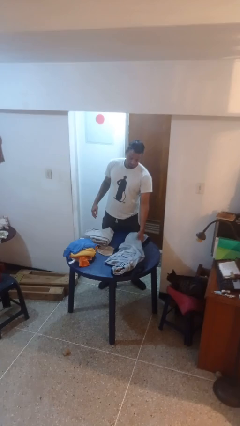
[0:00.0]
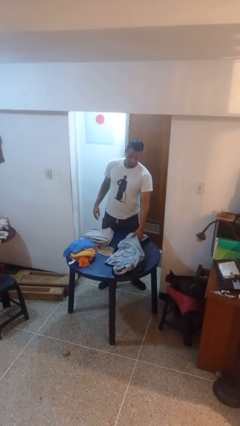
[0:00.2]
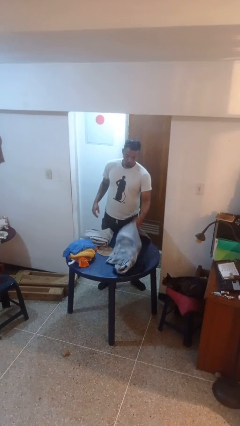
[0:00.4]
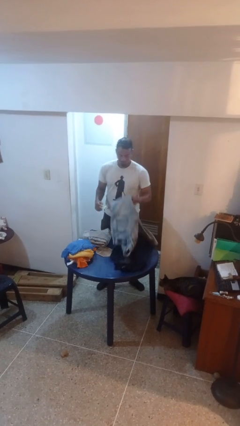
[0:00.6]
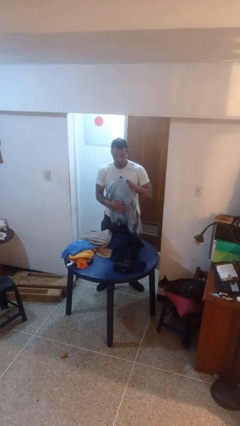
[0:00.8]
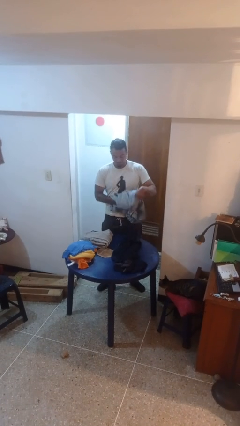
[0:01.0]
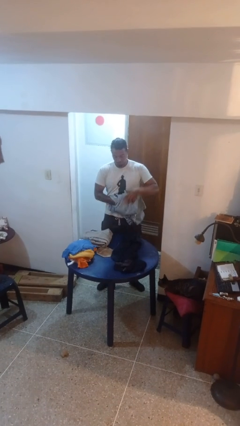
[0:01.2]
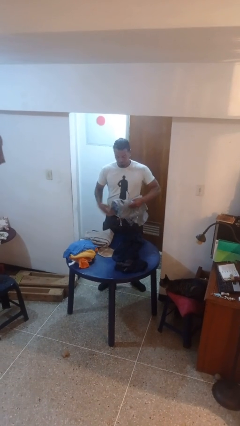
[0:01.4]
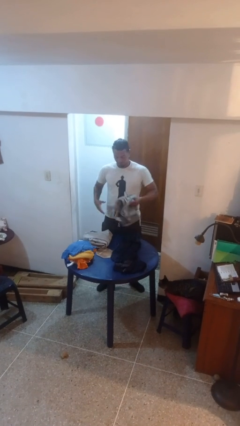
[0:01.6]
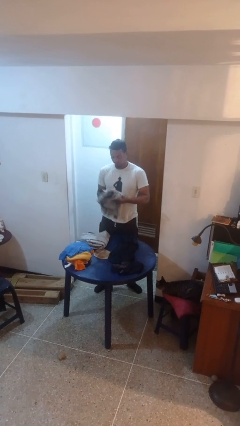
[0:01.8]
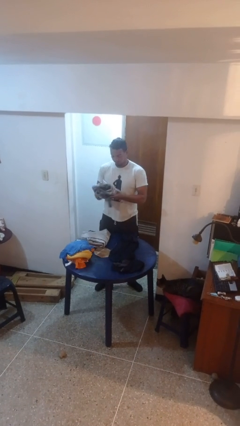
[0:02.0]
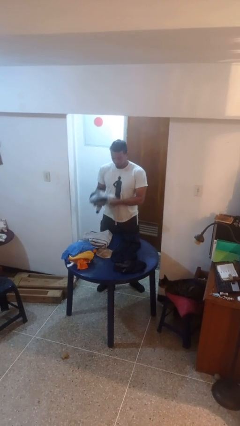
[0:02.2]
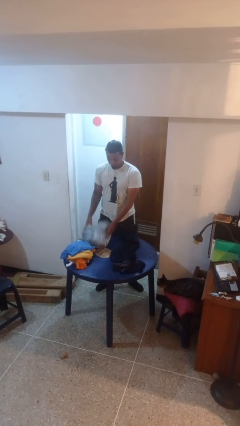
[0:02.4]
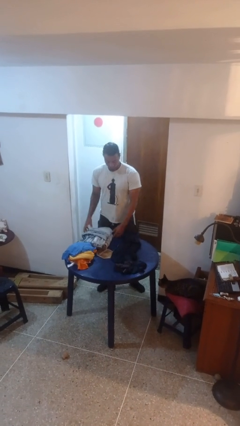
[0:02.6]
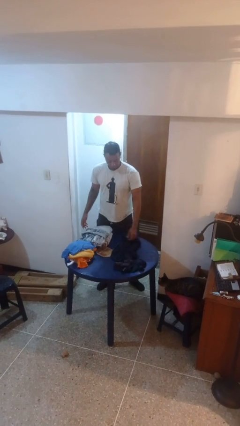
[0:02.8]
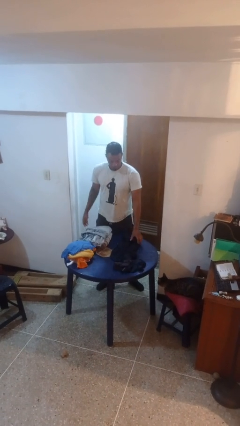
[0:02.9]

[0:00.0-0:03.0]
person folds pants

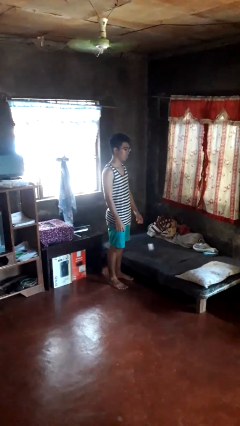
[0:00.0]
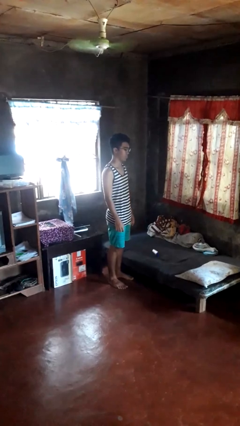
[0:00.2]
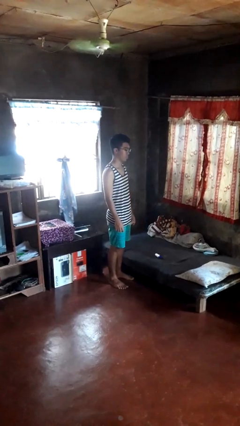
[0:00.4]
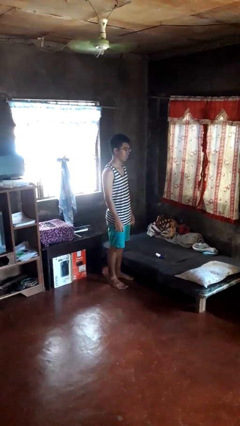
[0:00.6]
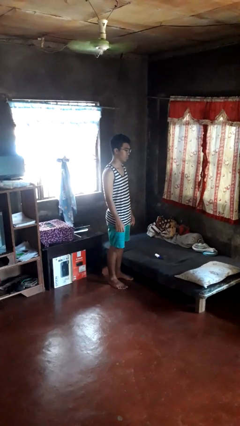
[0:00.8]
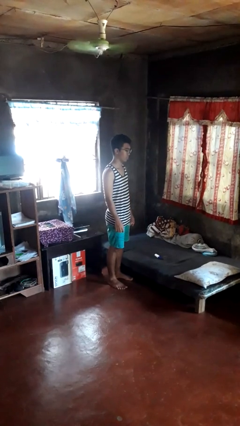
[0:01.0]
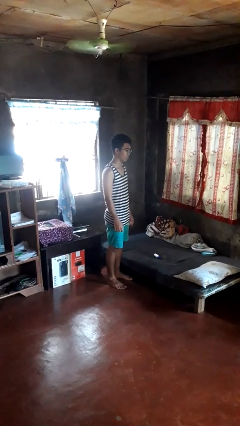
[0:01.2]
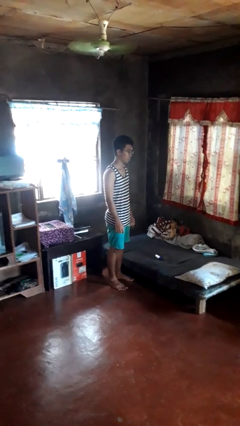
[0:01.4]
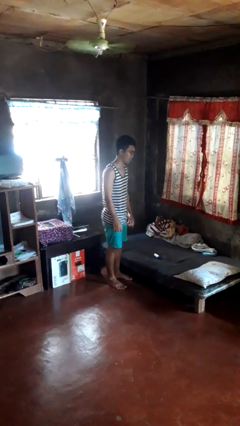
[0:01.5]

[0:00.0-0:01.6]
person throws object on bed

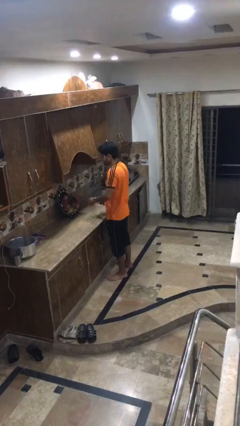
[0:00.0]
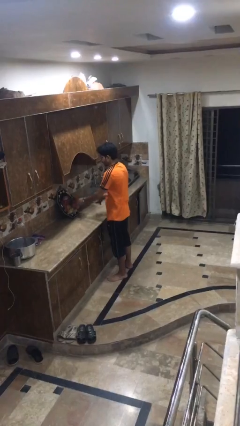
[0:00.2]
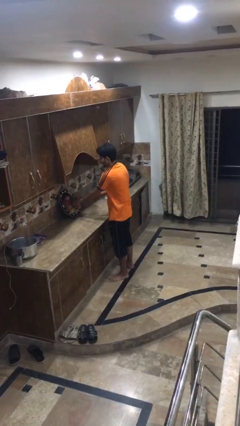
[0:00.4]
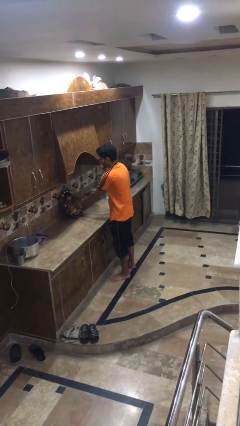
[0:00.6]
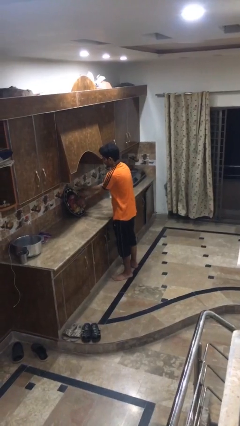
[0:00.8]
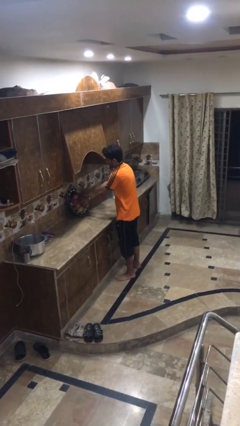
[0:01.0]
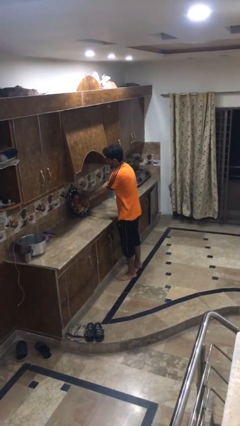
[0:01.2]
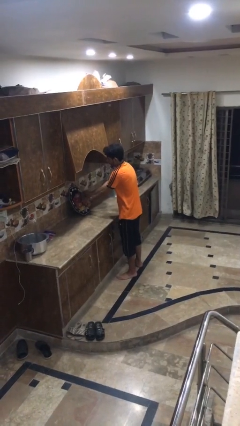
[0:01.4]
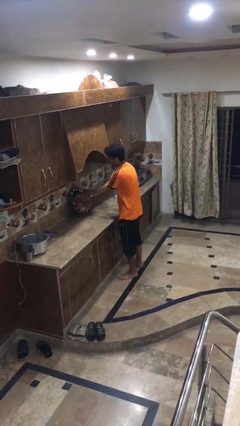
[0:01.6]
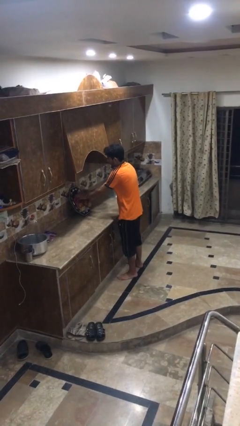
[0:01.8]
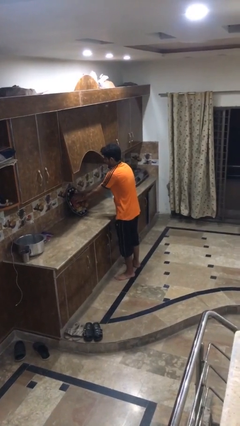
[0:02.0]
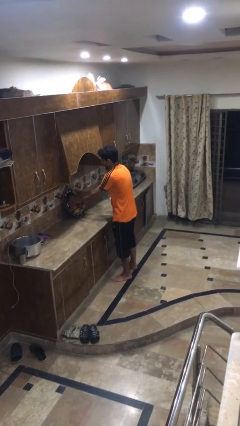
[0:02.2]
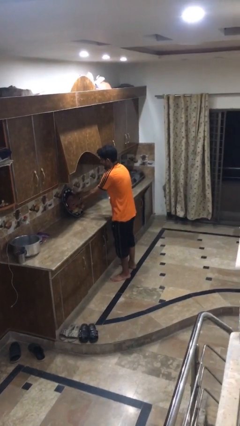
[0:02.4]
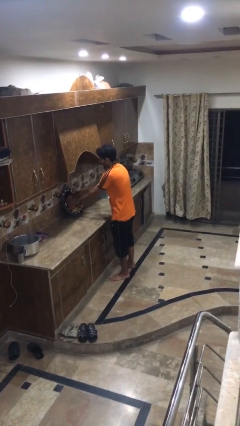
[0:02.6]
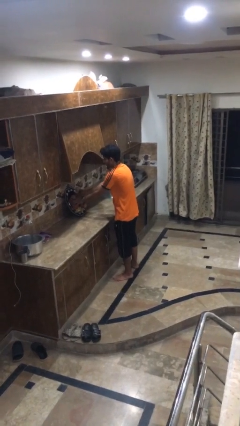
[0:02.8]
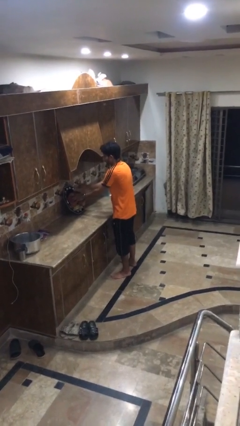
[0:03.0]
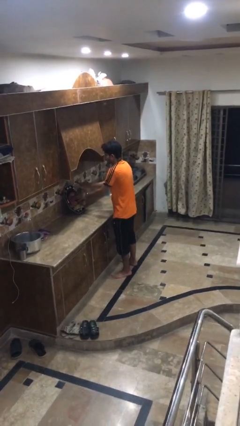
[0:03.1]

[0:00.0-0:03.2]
person arranges flowers in vase

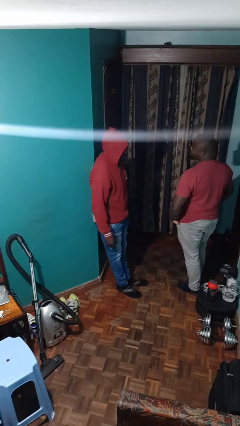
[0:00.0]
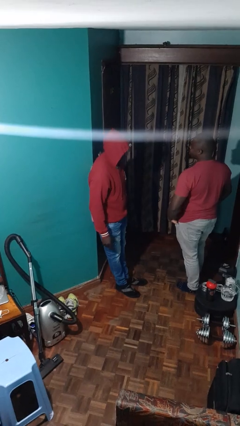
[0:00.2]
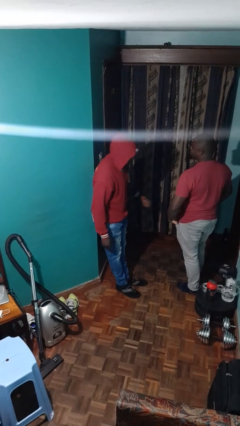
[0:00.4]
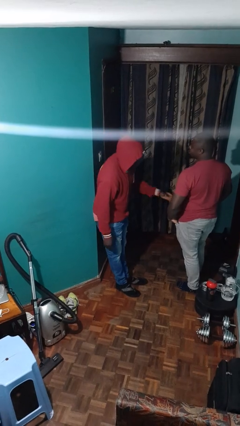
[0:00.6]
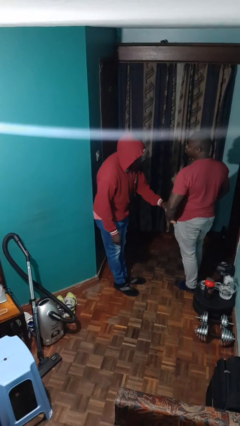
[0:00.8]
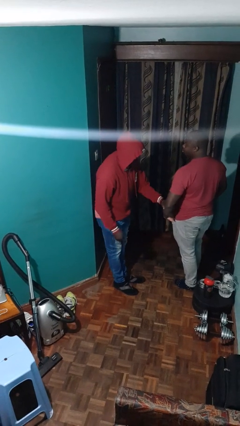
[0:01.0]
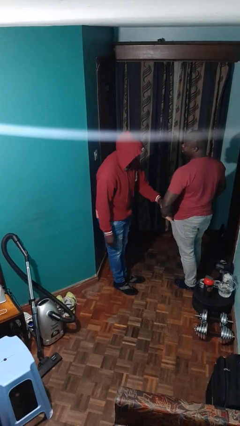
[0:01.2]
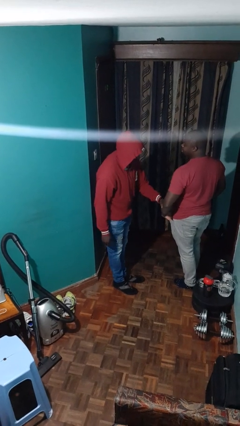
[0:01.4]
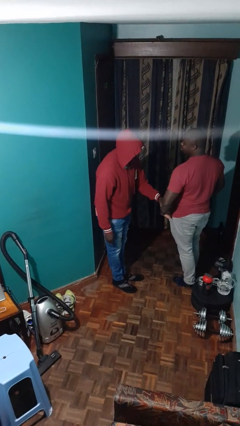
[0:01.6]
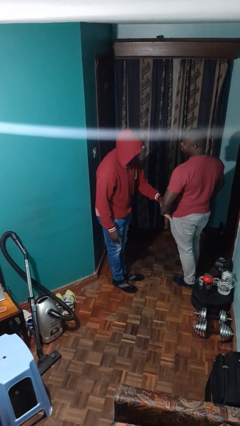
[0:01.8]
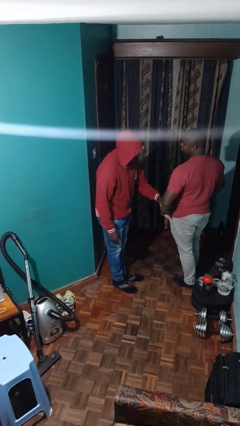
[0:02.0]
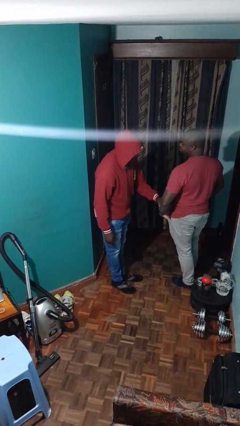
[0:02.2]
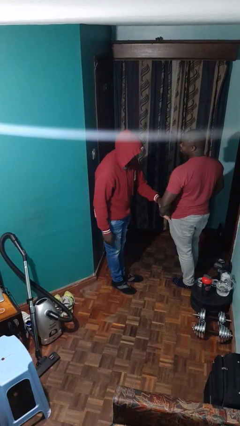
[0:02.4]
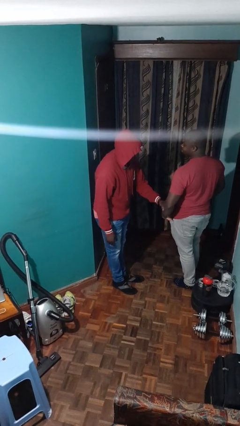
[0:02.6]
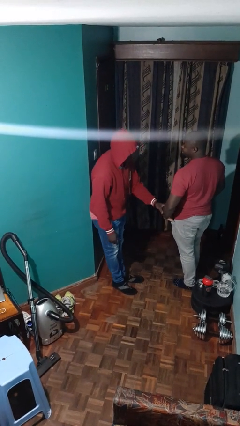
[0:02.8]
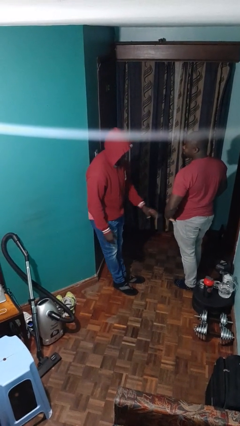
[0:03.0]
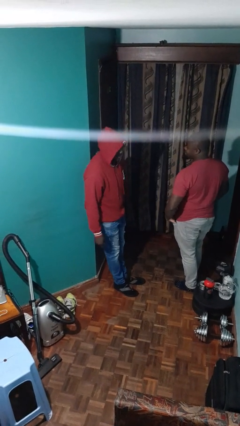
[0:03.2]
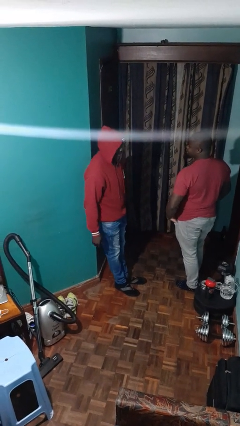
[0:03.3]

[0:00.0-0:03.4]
person grabs person by forearm

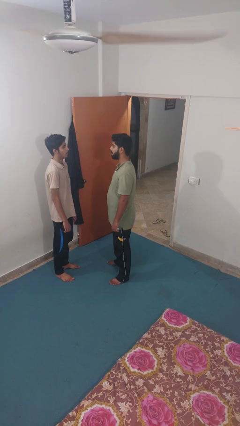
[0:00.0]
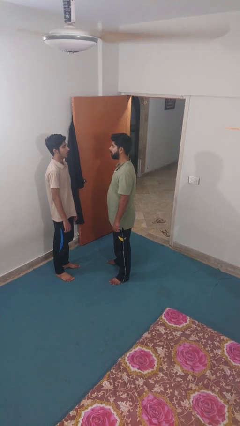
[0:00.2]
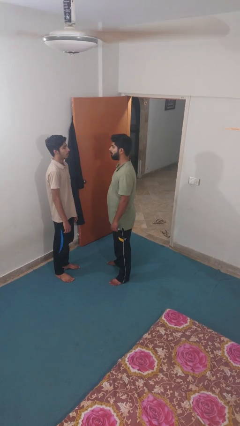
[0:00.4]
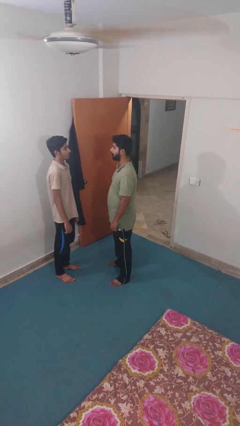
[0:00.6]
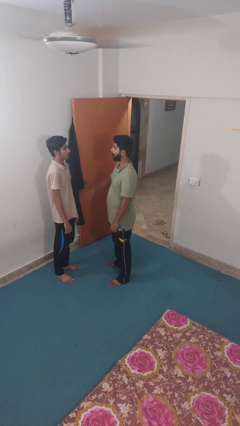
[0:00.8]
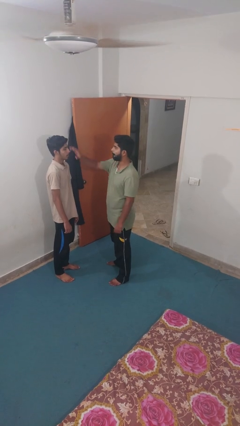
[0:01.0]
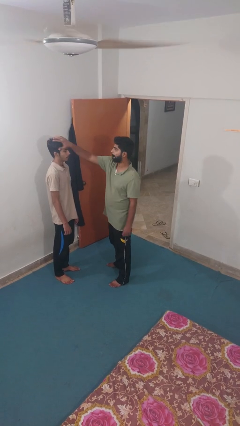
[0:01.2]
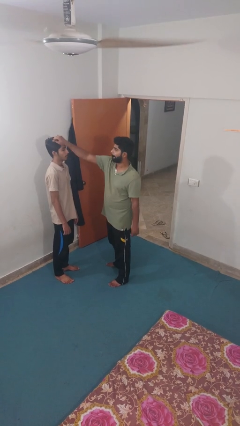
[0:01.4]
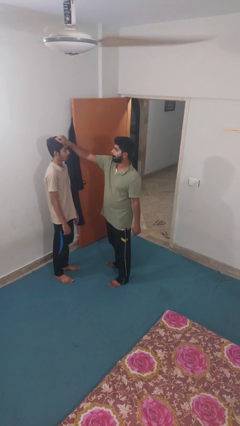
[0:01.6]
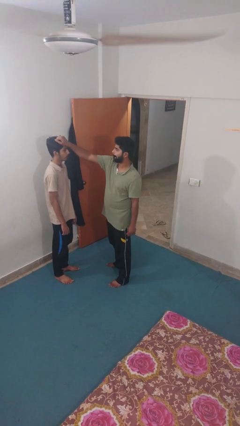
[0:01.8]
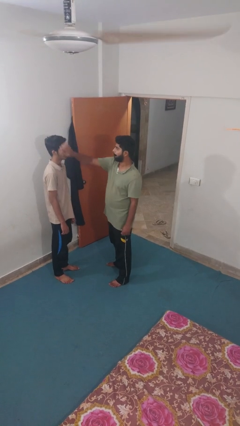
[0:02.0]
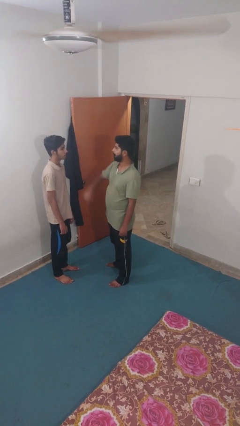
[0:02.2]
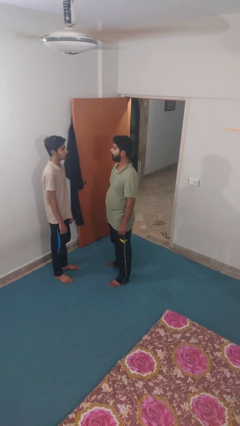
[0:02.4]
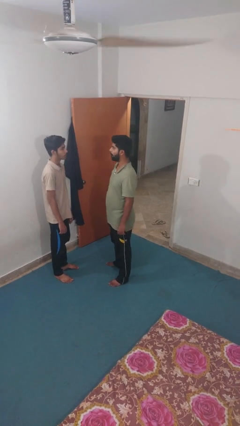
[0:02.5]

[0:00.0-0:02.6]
person grabs person by hair

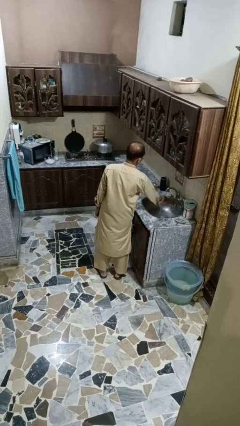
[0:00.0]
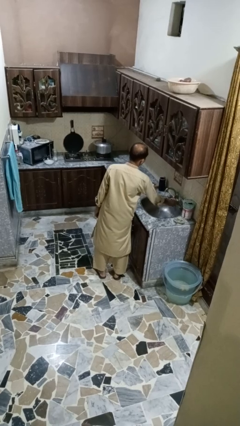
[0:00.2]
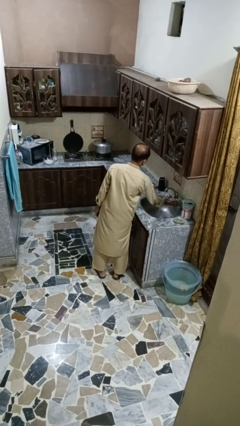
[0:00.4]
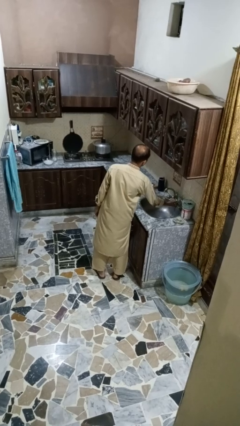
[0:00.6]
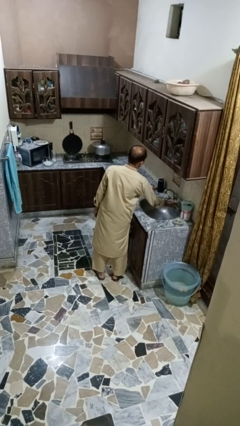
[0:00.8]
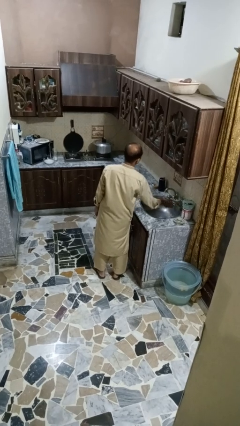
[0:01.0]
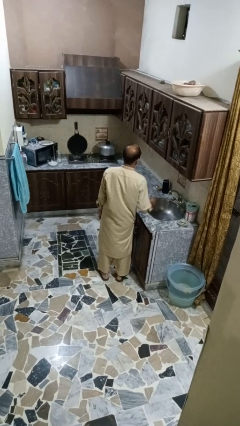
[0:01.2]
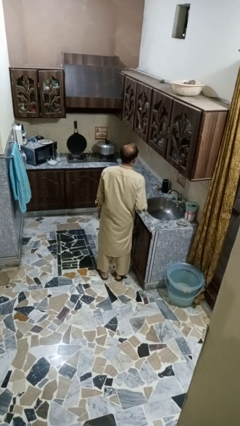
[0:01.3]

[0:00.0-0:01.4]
person turns off faucet

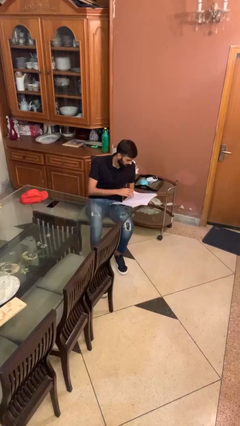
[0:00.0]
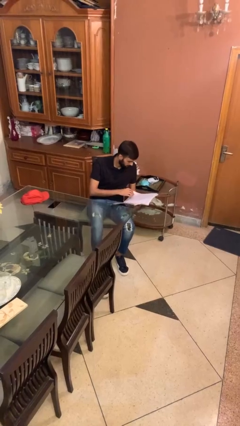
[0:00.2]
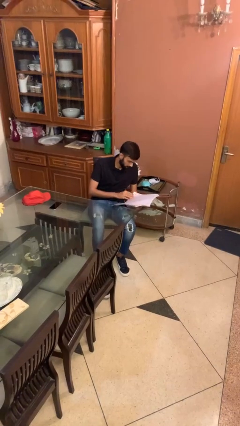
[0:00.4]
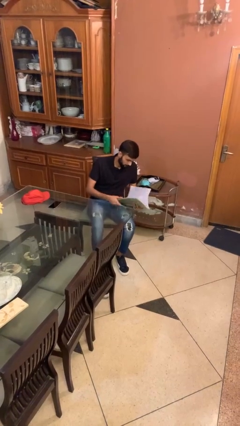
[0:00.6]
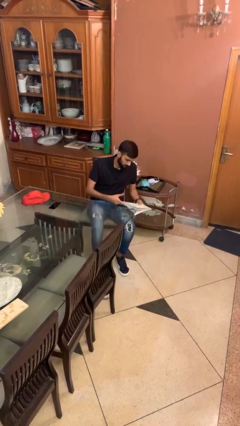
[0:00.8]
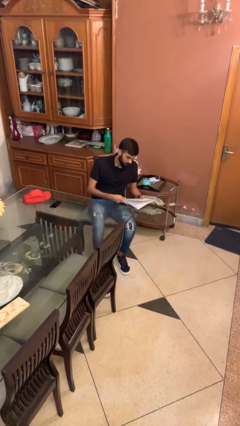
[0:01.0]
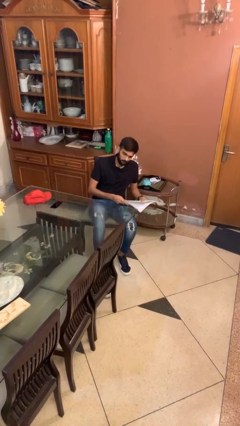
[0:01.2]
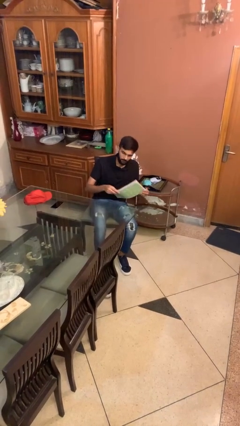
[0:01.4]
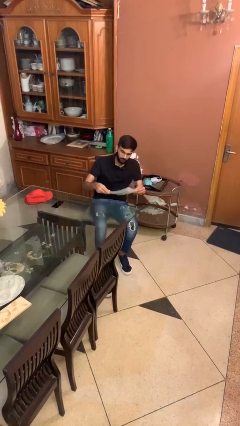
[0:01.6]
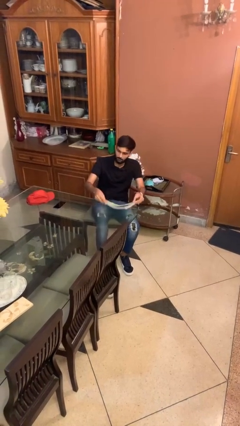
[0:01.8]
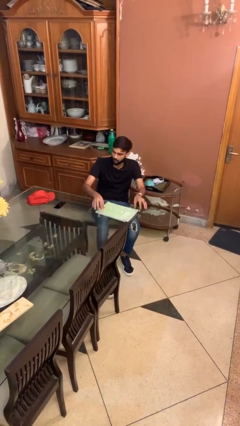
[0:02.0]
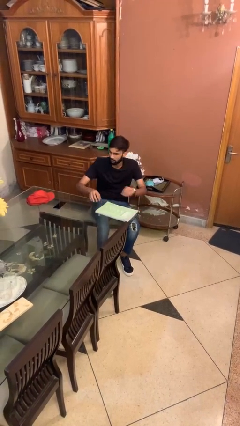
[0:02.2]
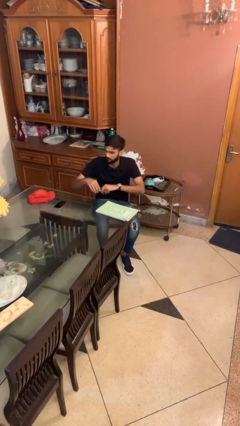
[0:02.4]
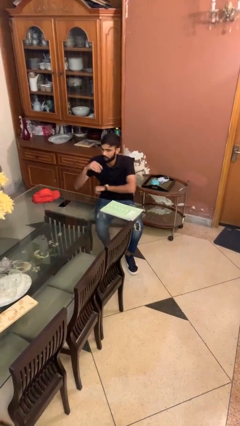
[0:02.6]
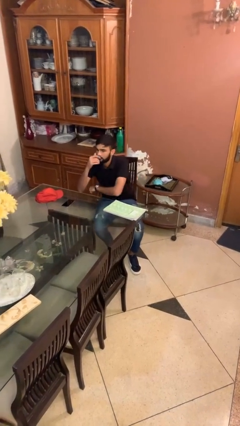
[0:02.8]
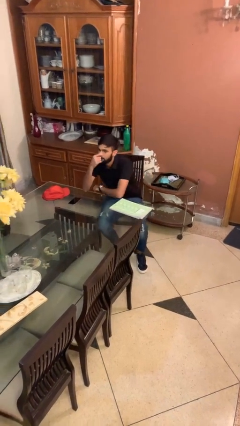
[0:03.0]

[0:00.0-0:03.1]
person puts down object on table
